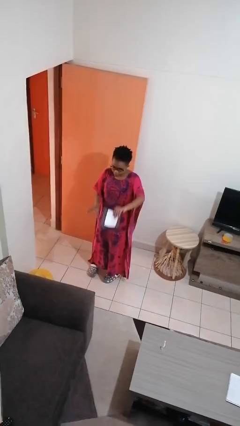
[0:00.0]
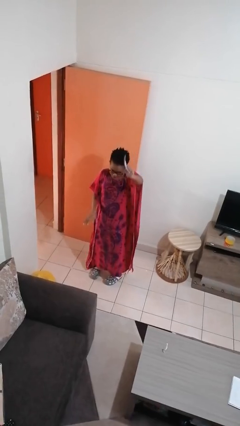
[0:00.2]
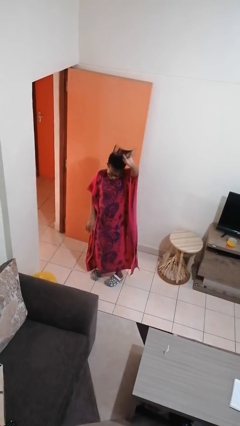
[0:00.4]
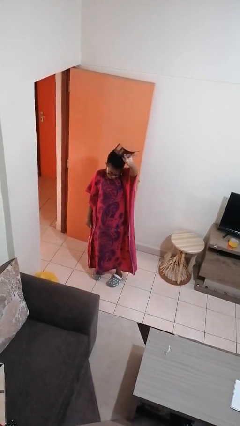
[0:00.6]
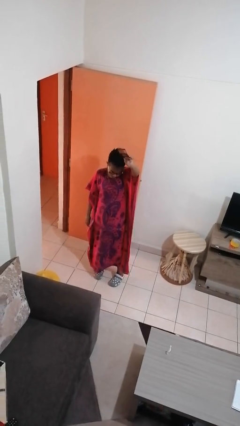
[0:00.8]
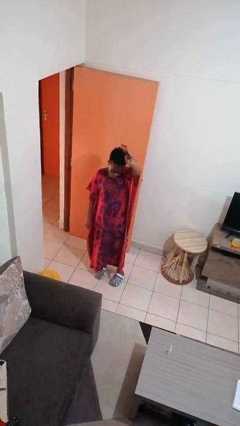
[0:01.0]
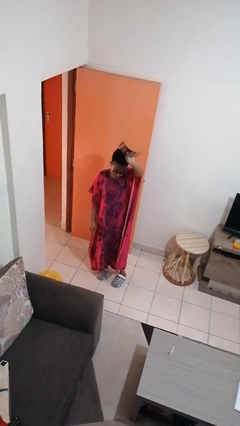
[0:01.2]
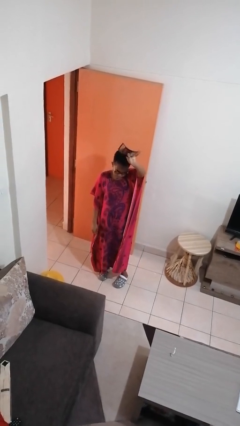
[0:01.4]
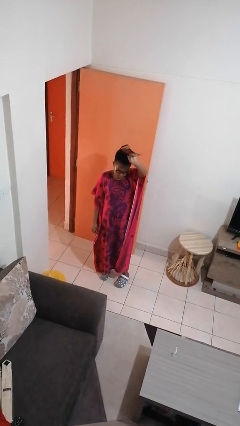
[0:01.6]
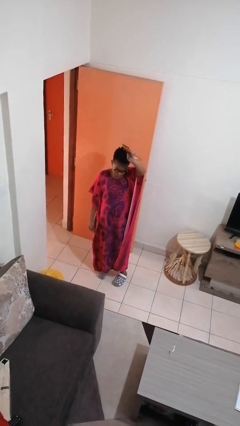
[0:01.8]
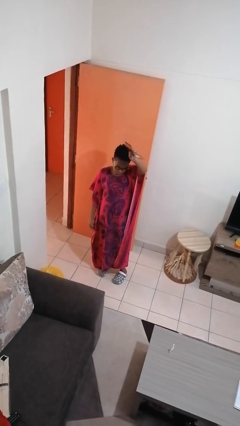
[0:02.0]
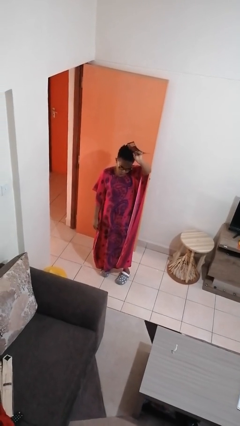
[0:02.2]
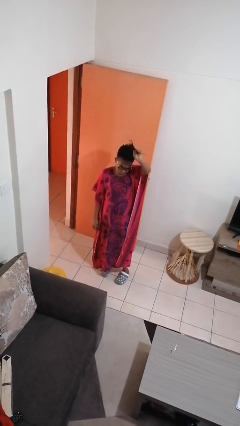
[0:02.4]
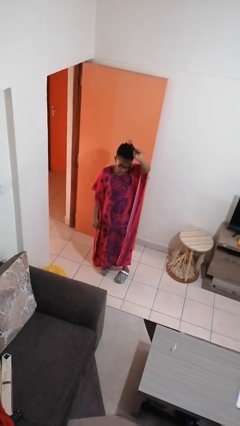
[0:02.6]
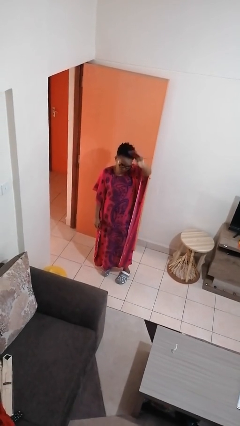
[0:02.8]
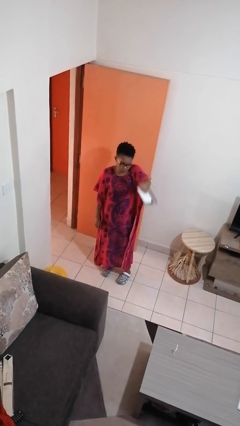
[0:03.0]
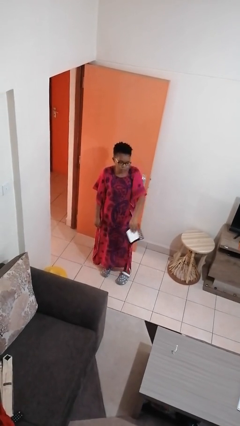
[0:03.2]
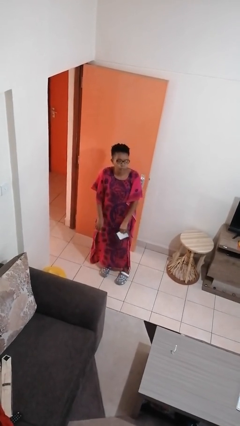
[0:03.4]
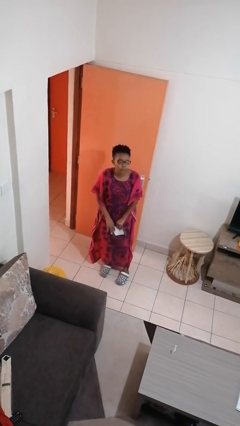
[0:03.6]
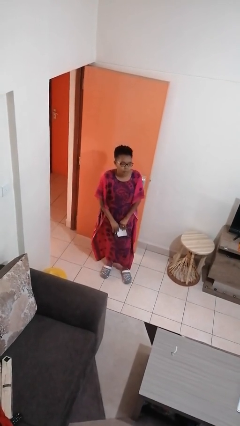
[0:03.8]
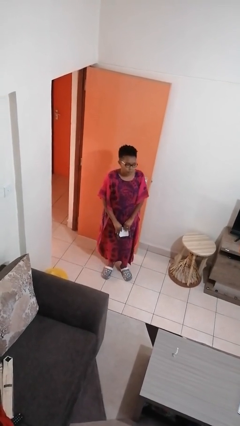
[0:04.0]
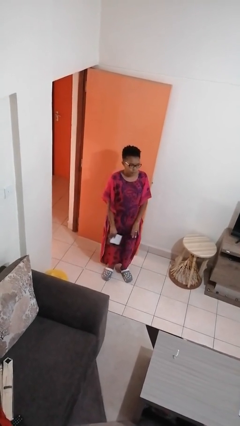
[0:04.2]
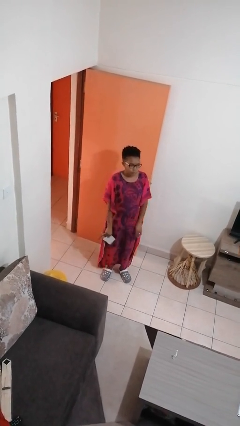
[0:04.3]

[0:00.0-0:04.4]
person holds object above head

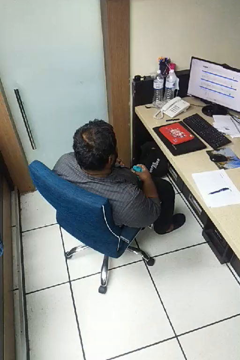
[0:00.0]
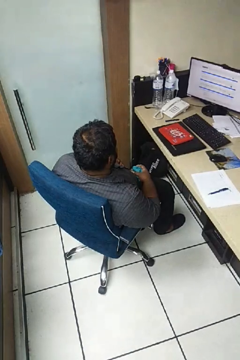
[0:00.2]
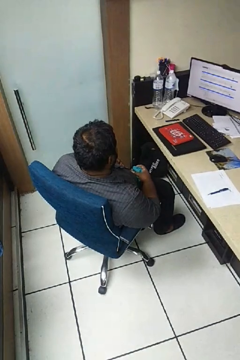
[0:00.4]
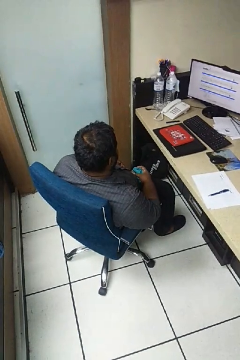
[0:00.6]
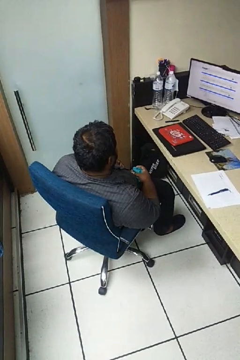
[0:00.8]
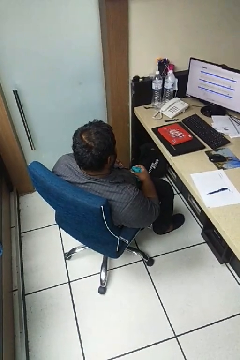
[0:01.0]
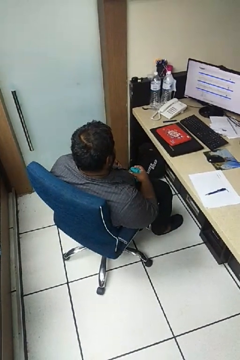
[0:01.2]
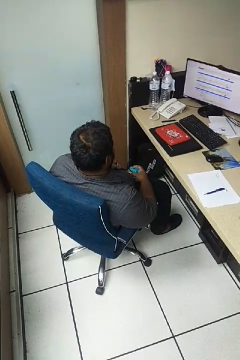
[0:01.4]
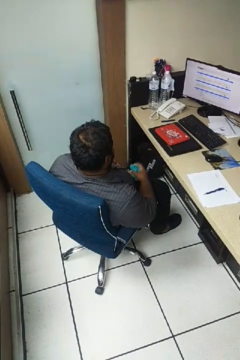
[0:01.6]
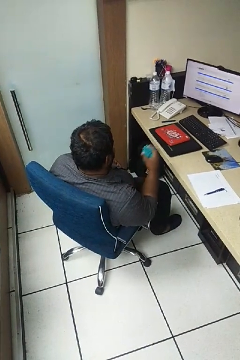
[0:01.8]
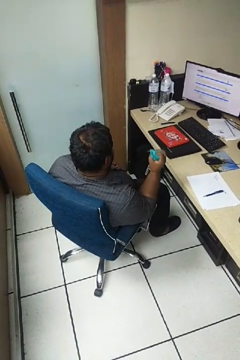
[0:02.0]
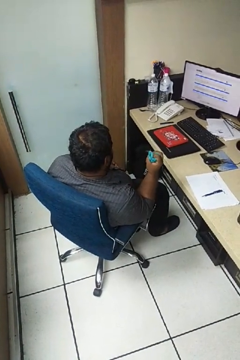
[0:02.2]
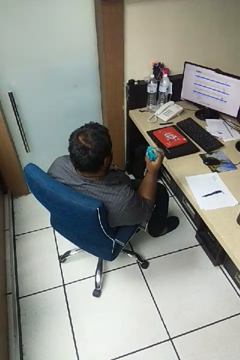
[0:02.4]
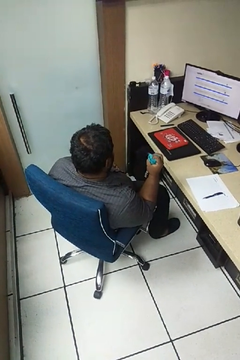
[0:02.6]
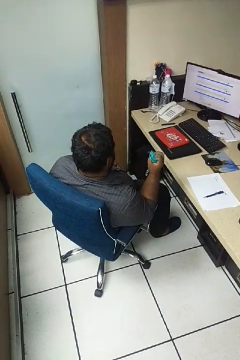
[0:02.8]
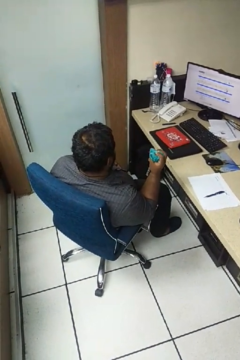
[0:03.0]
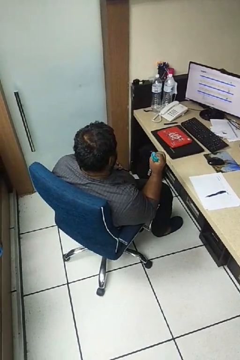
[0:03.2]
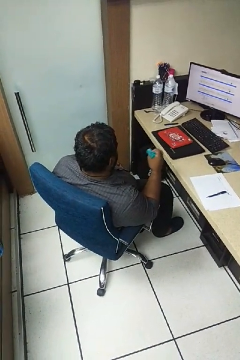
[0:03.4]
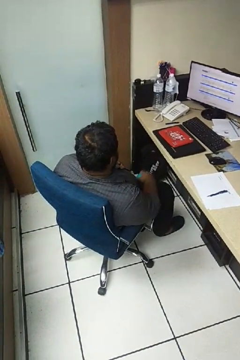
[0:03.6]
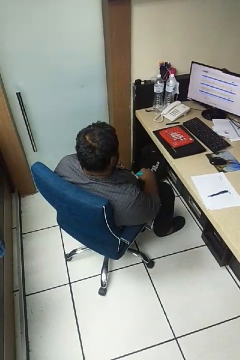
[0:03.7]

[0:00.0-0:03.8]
person squeezes object

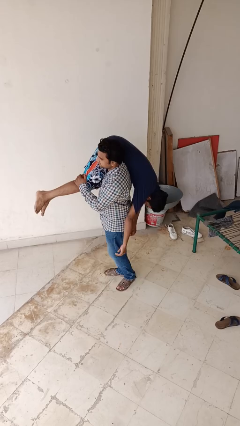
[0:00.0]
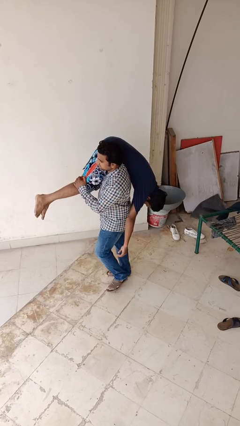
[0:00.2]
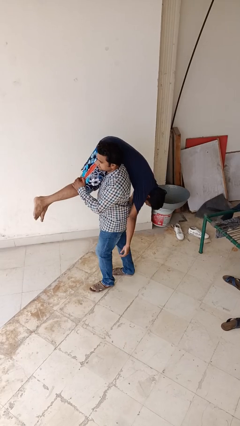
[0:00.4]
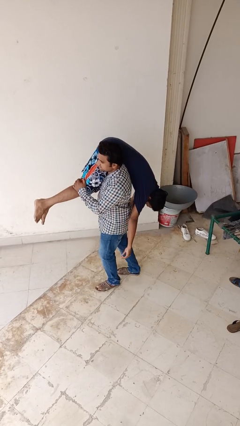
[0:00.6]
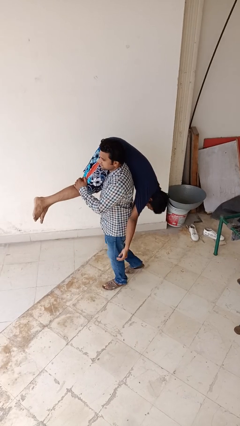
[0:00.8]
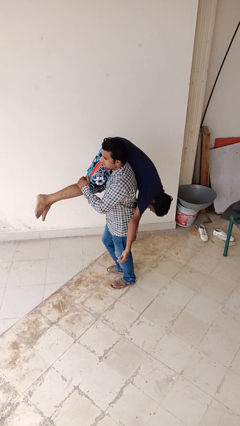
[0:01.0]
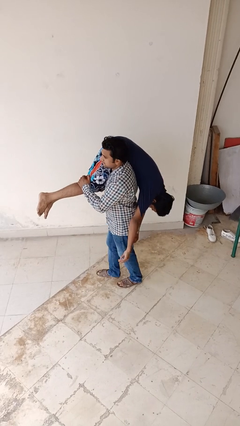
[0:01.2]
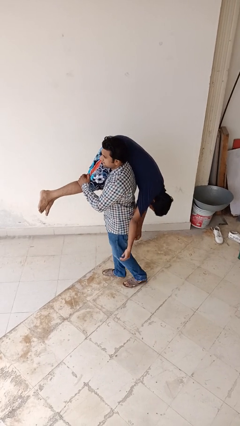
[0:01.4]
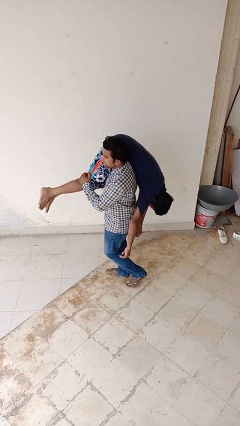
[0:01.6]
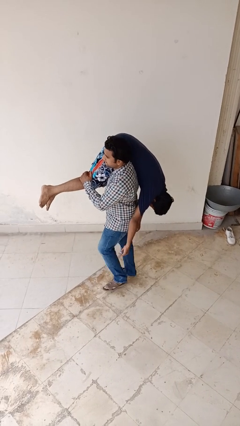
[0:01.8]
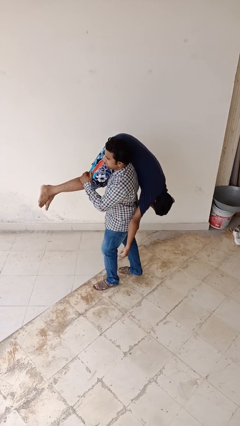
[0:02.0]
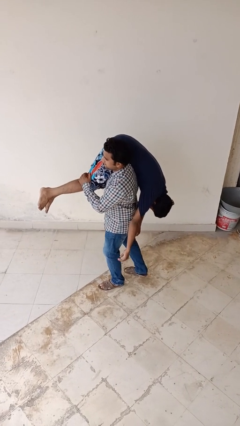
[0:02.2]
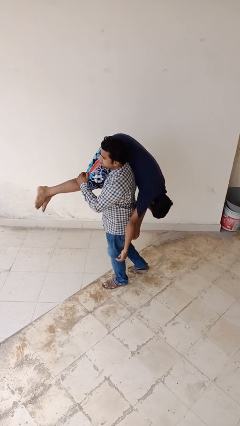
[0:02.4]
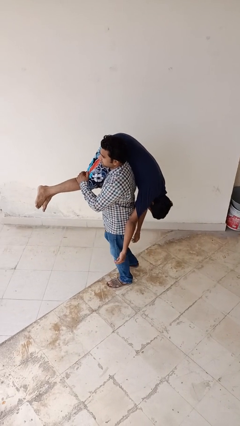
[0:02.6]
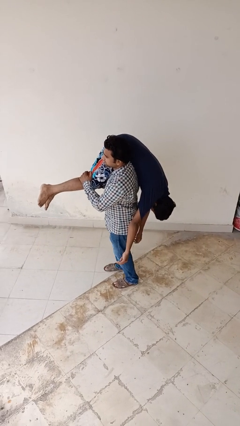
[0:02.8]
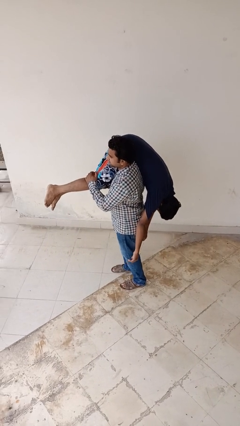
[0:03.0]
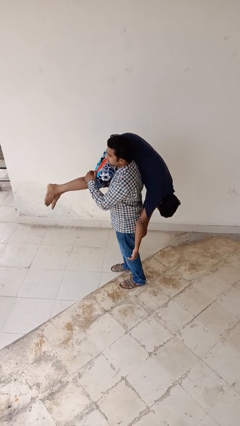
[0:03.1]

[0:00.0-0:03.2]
person carries person on shoulders

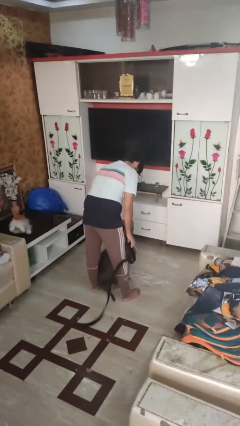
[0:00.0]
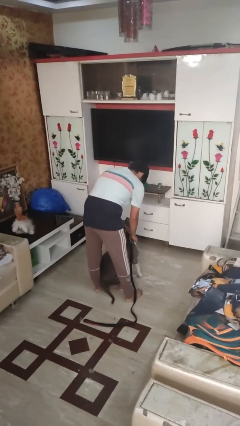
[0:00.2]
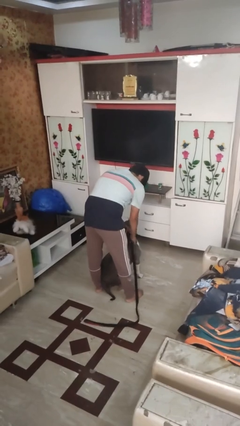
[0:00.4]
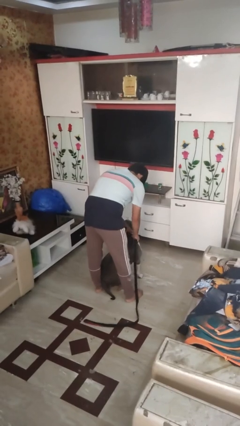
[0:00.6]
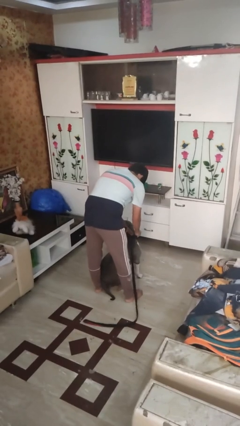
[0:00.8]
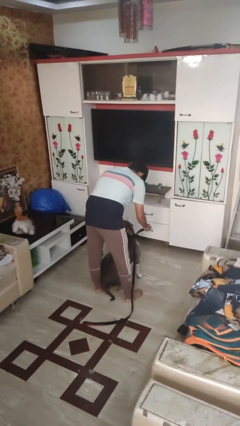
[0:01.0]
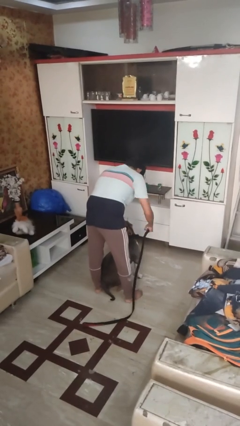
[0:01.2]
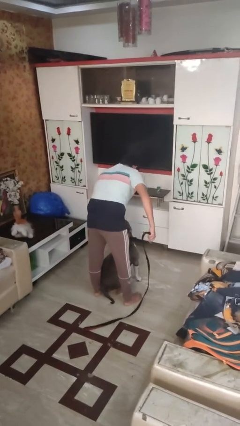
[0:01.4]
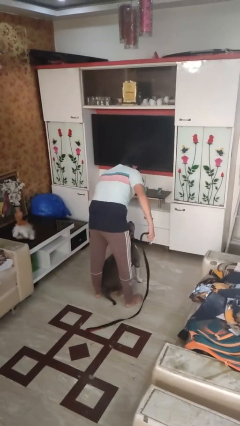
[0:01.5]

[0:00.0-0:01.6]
person unattaches leash from dog

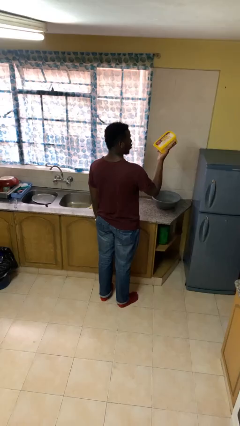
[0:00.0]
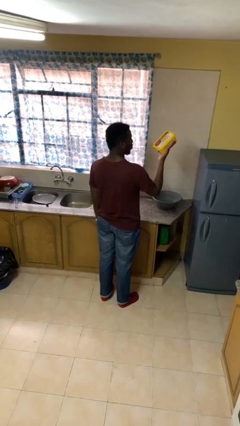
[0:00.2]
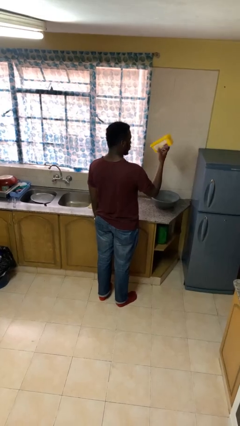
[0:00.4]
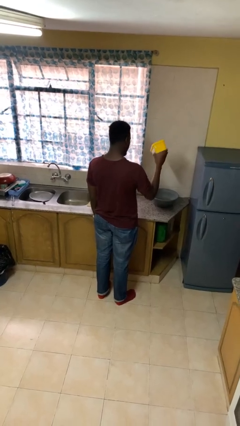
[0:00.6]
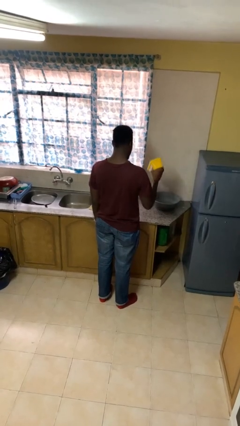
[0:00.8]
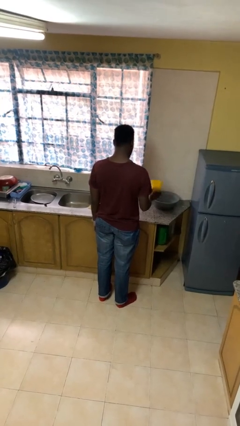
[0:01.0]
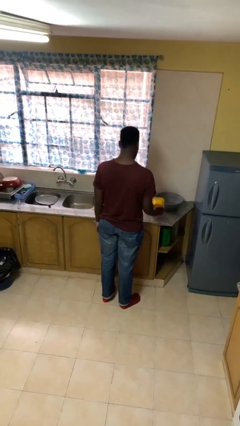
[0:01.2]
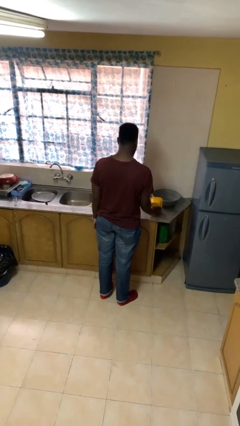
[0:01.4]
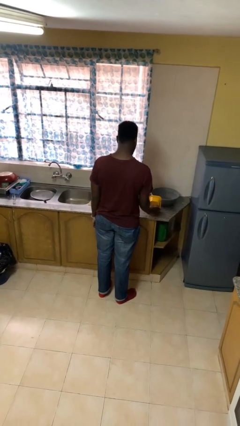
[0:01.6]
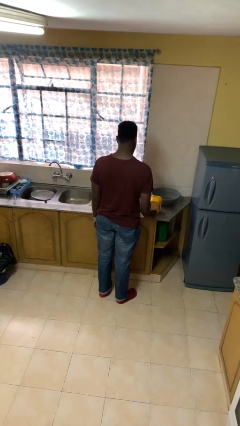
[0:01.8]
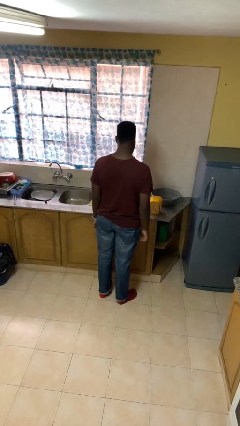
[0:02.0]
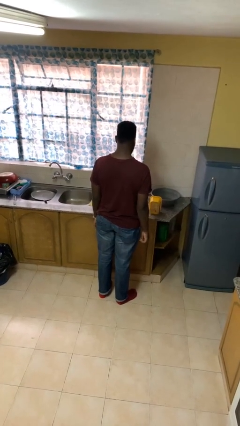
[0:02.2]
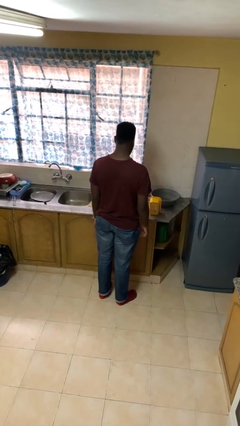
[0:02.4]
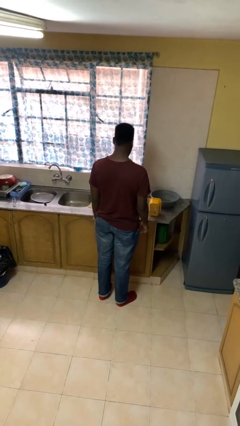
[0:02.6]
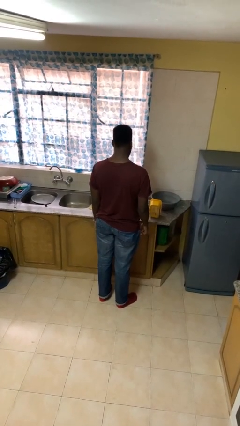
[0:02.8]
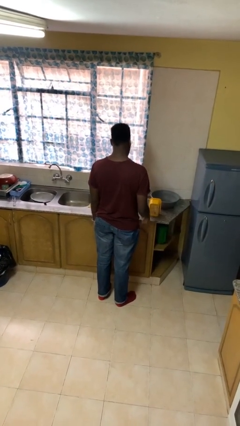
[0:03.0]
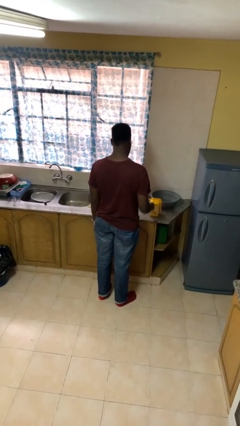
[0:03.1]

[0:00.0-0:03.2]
person puts down object on countertop

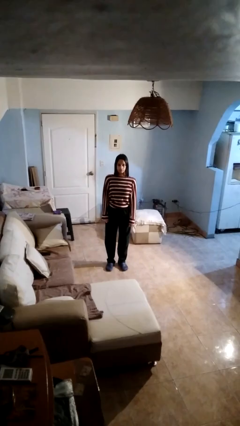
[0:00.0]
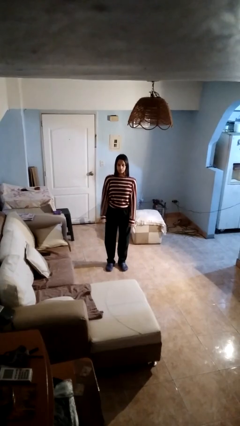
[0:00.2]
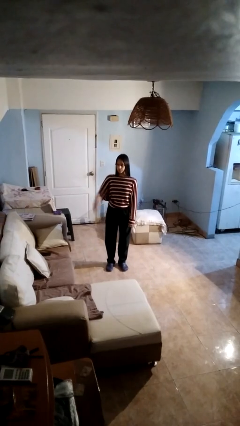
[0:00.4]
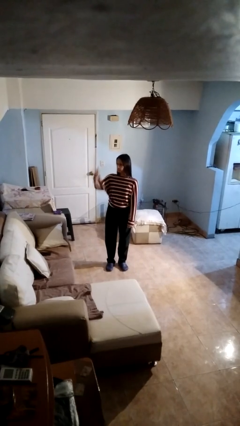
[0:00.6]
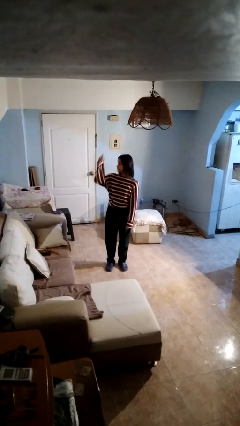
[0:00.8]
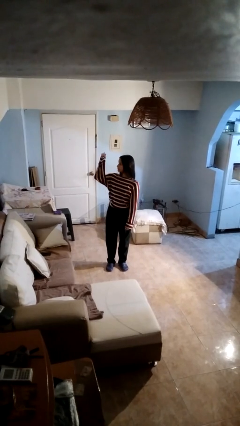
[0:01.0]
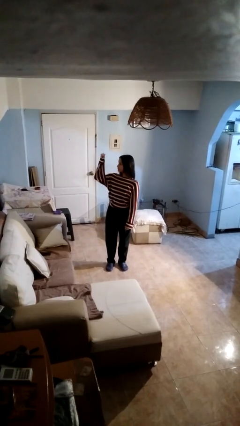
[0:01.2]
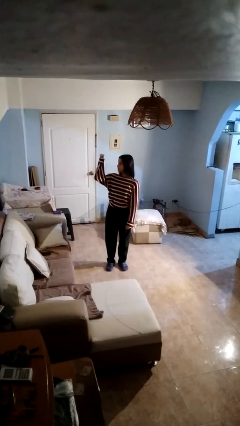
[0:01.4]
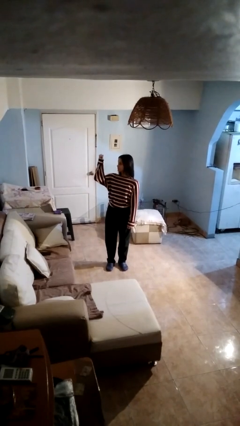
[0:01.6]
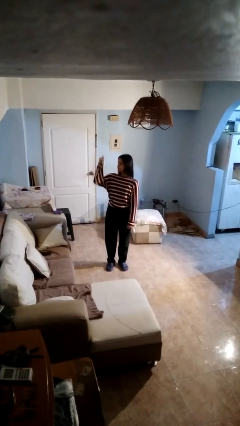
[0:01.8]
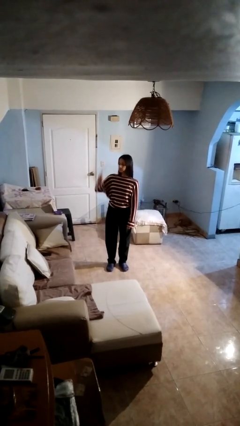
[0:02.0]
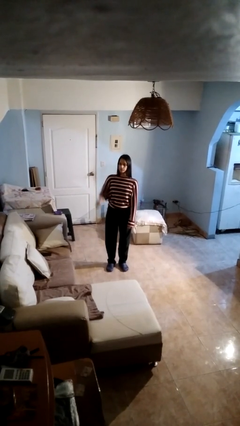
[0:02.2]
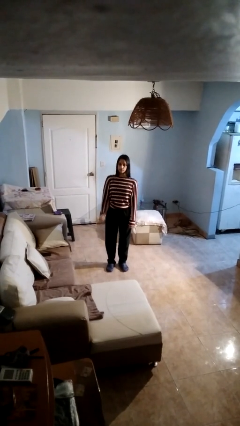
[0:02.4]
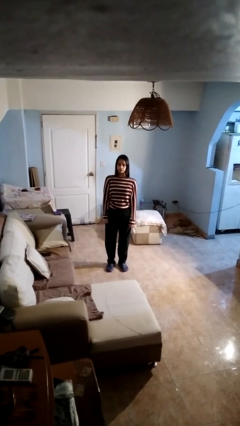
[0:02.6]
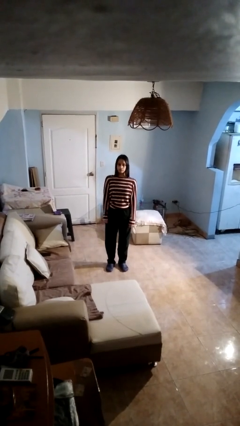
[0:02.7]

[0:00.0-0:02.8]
person gestures behind me
